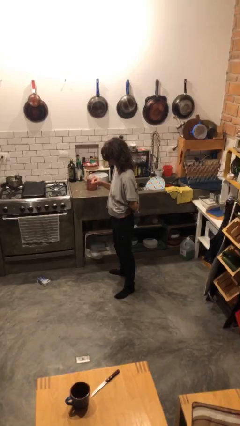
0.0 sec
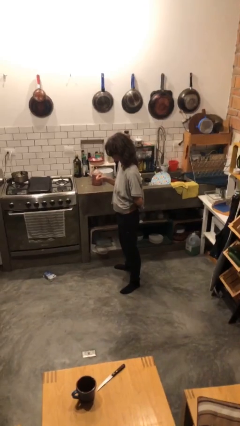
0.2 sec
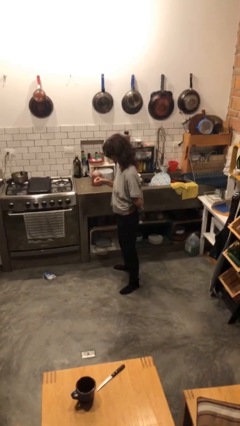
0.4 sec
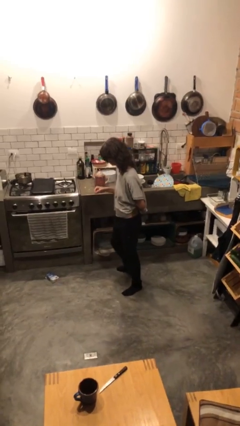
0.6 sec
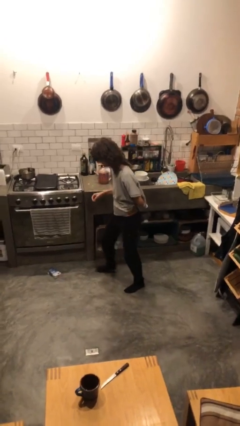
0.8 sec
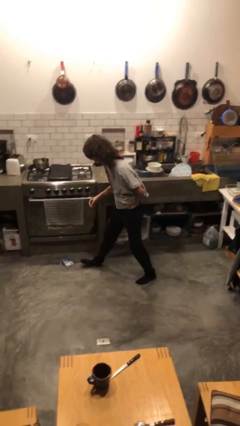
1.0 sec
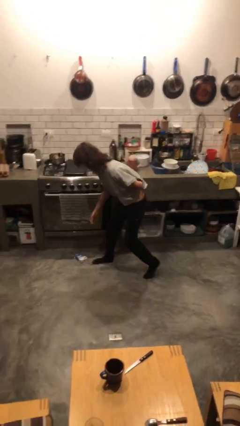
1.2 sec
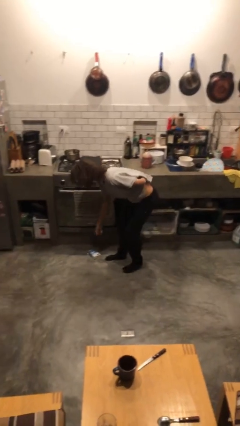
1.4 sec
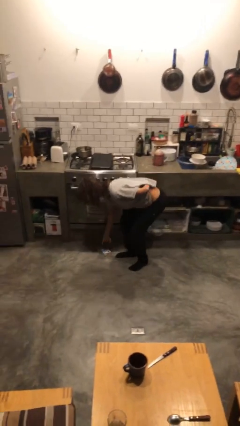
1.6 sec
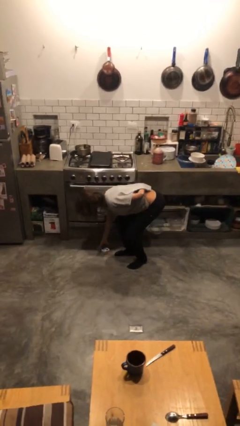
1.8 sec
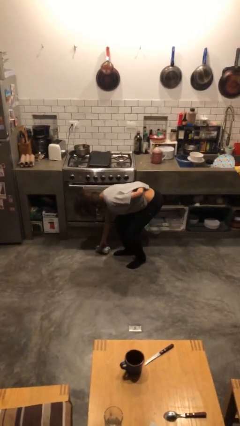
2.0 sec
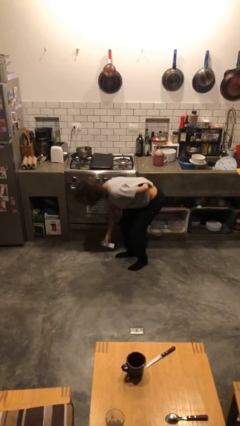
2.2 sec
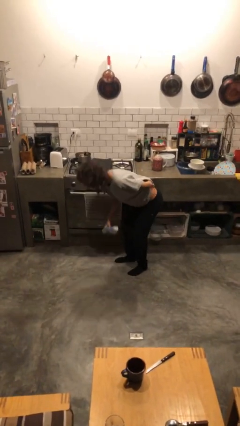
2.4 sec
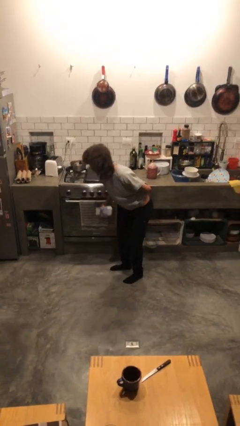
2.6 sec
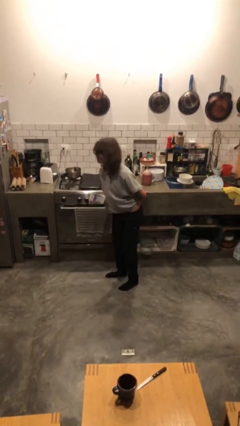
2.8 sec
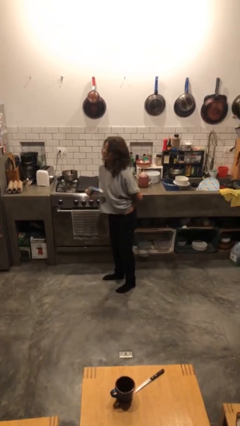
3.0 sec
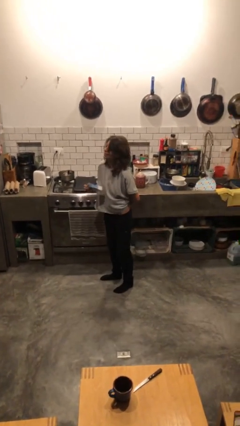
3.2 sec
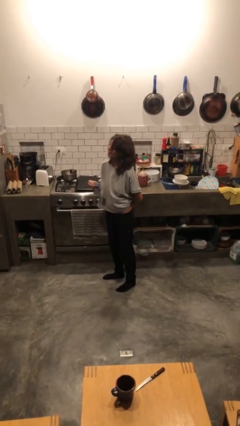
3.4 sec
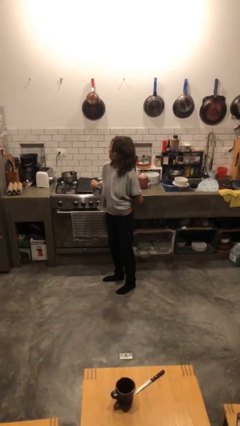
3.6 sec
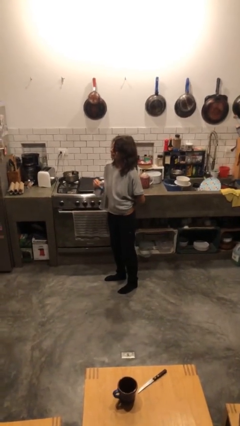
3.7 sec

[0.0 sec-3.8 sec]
person picks up object from floor

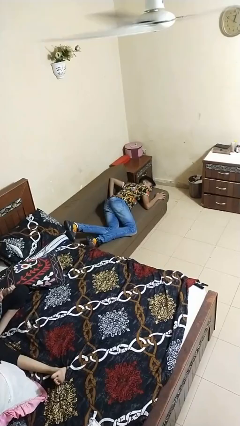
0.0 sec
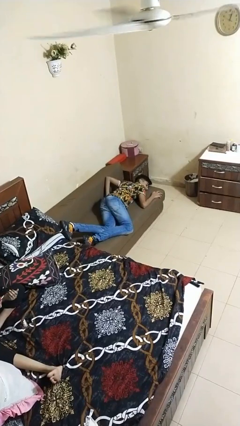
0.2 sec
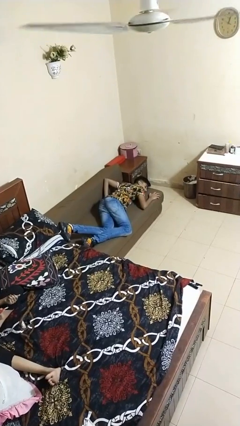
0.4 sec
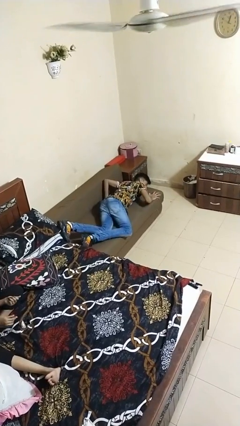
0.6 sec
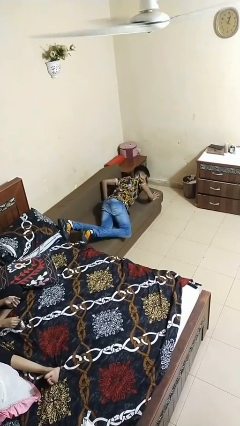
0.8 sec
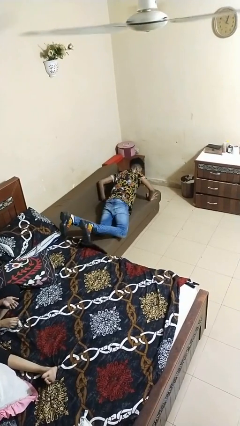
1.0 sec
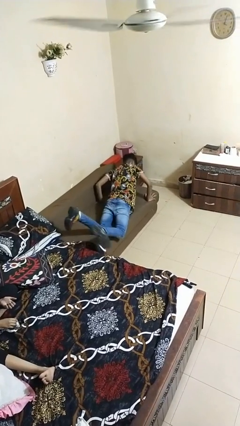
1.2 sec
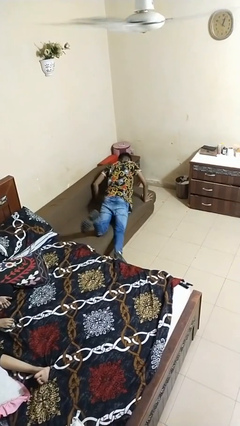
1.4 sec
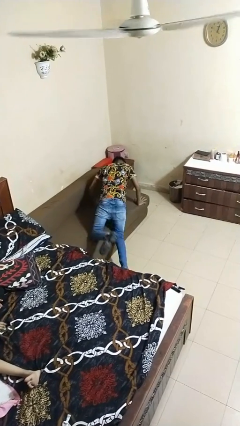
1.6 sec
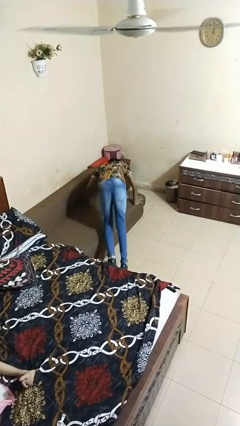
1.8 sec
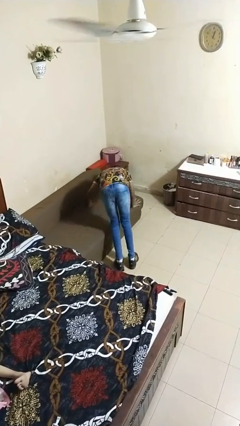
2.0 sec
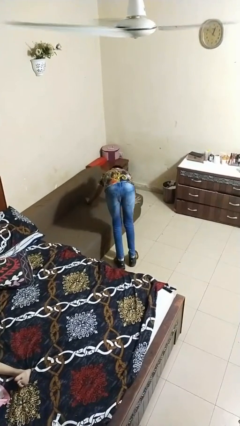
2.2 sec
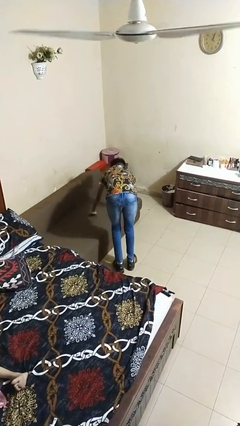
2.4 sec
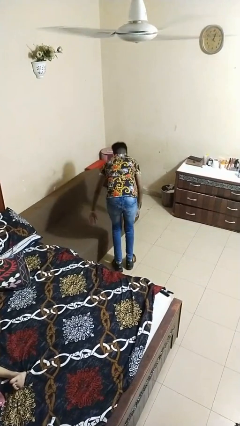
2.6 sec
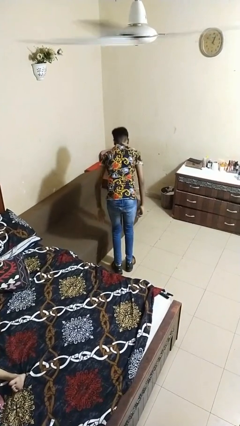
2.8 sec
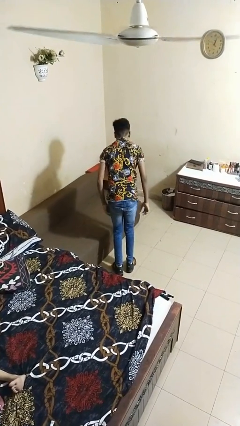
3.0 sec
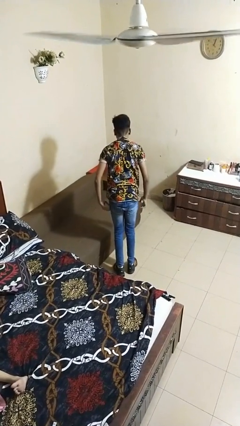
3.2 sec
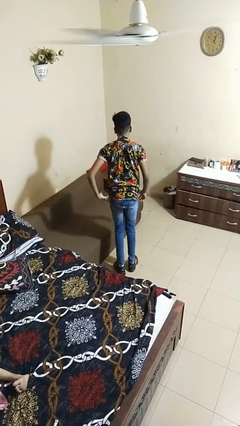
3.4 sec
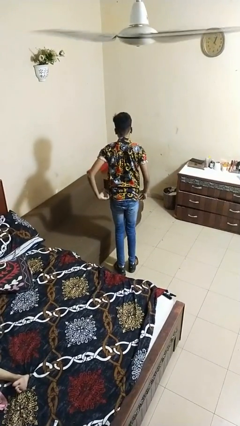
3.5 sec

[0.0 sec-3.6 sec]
person stands up

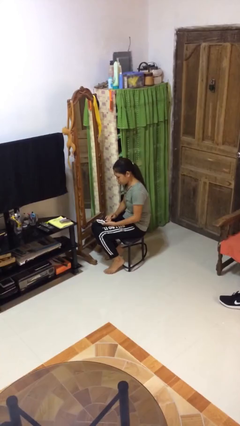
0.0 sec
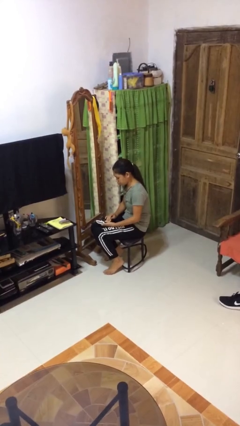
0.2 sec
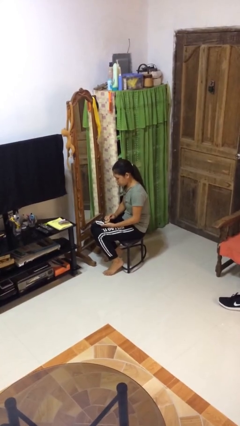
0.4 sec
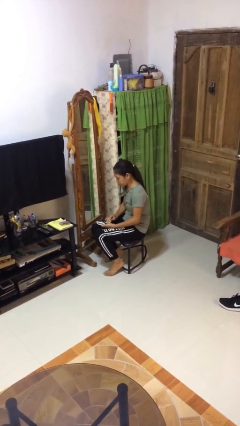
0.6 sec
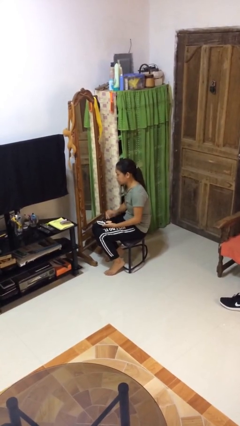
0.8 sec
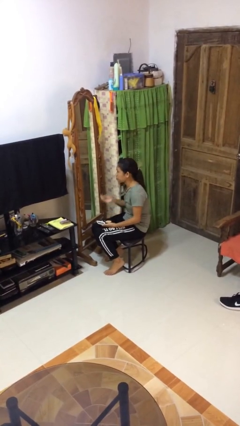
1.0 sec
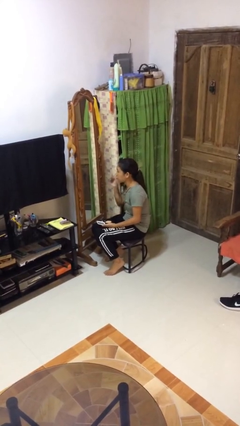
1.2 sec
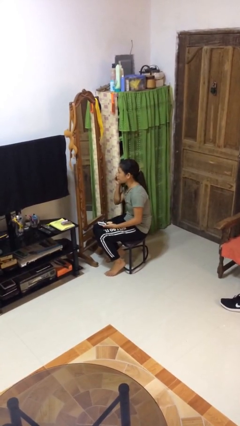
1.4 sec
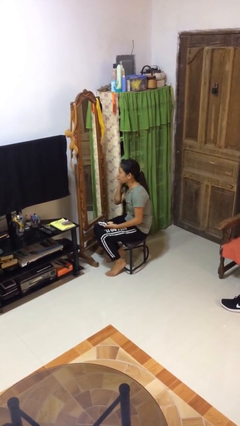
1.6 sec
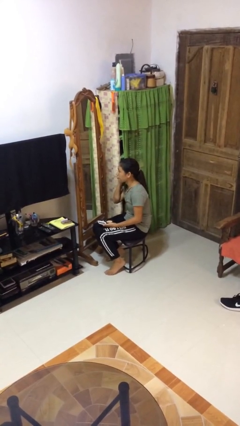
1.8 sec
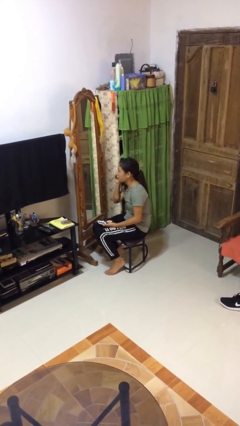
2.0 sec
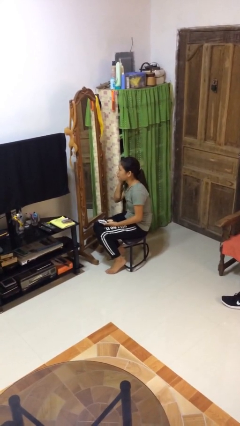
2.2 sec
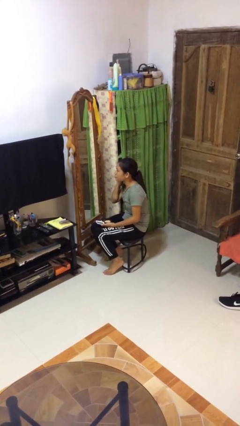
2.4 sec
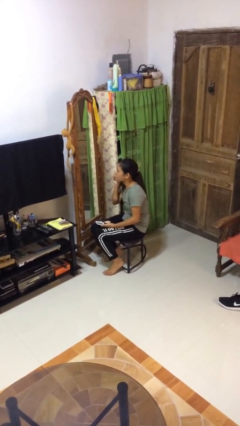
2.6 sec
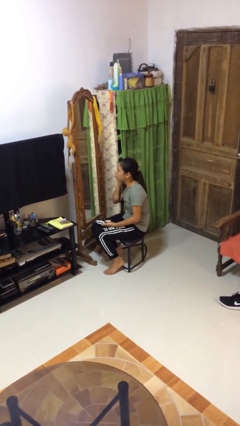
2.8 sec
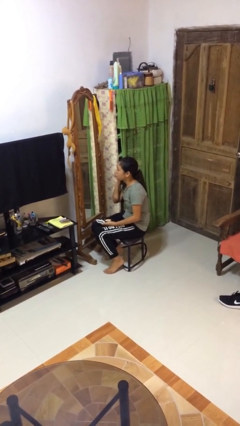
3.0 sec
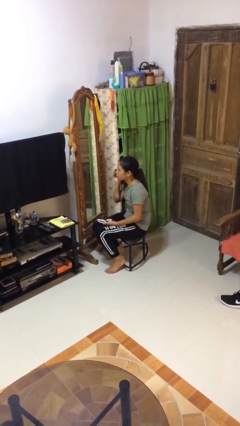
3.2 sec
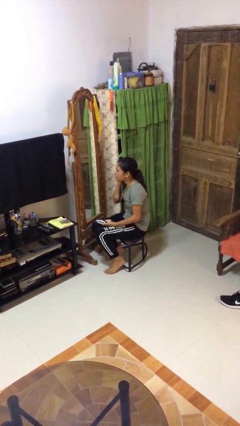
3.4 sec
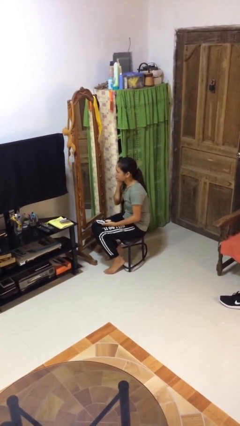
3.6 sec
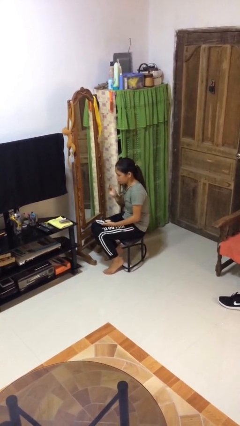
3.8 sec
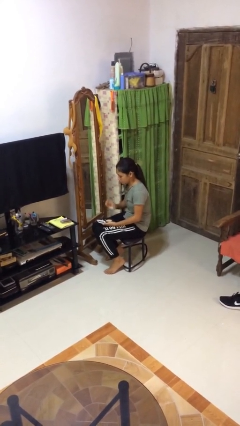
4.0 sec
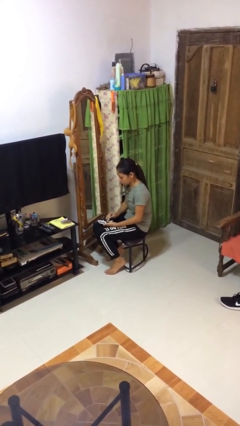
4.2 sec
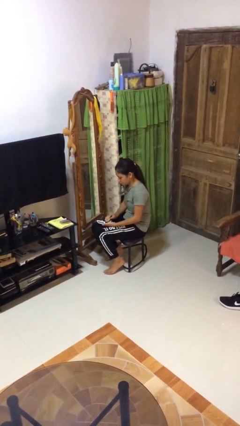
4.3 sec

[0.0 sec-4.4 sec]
person applies foundation makeup

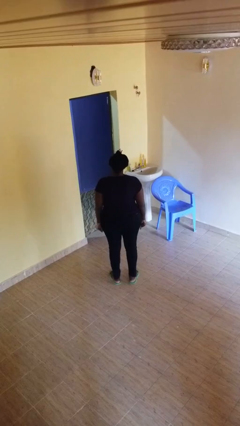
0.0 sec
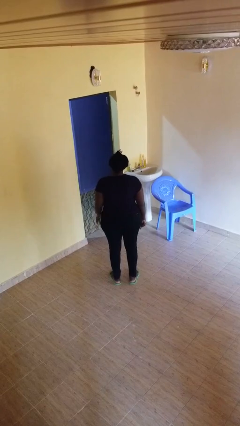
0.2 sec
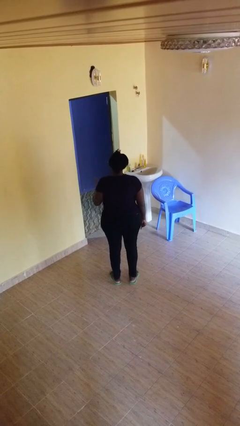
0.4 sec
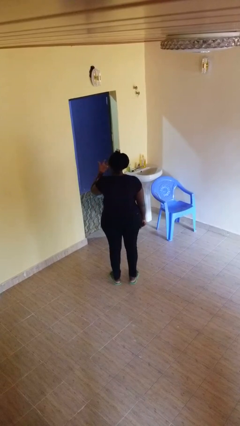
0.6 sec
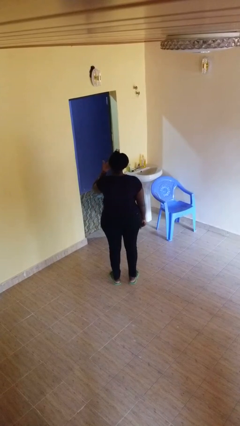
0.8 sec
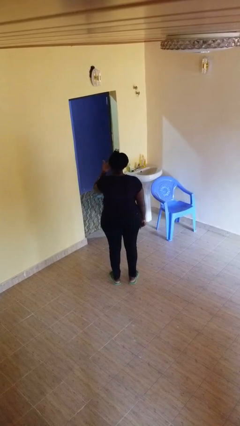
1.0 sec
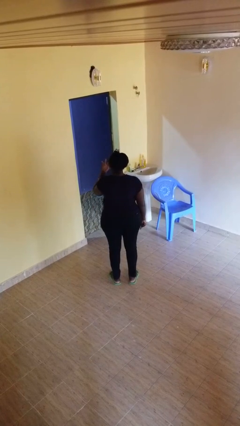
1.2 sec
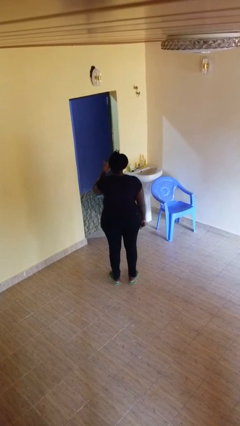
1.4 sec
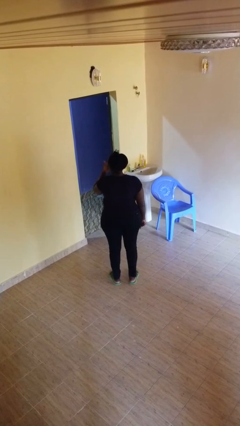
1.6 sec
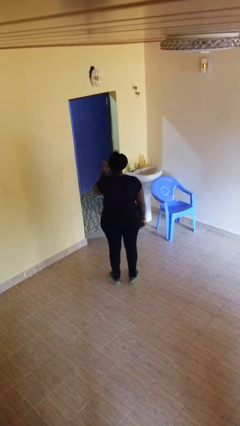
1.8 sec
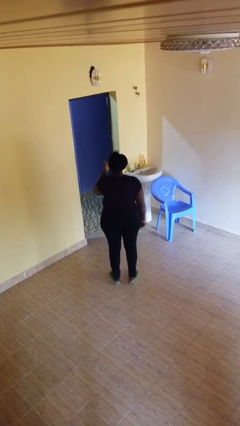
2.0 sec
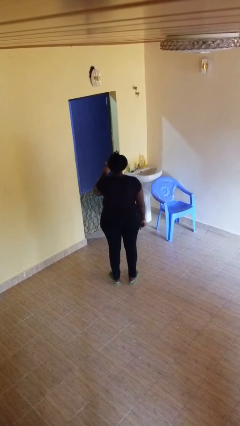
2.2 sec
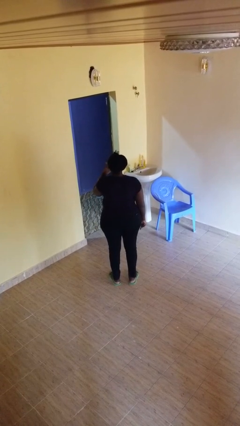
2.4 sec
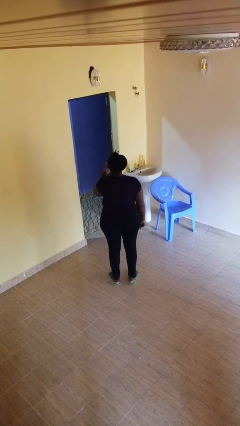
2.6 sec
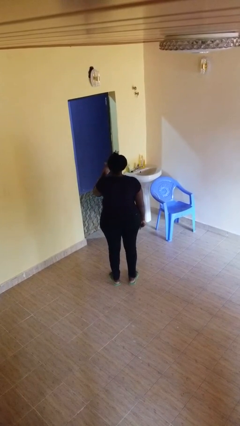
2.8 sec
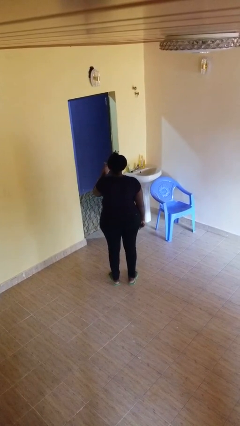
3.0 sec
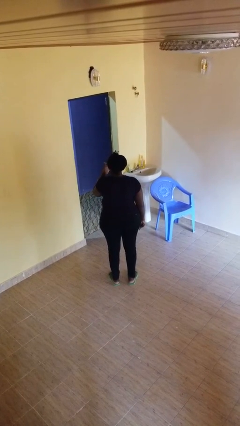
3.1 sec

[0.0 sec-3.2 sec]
person licks fingers

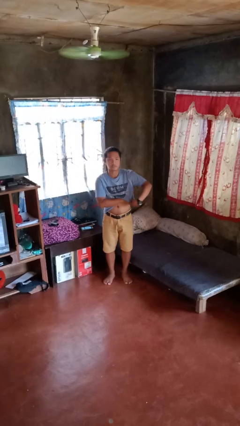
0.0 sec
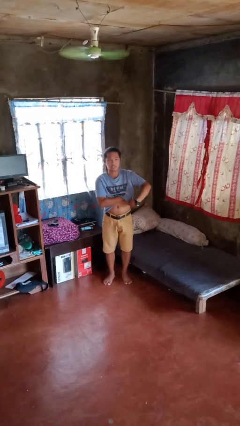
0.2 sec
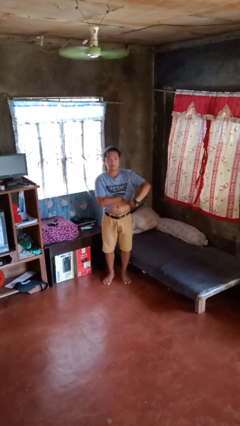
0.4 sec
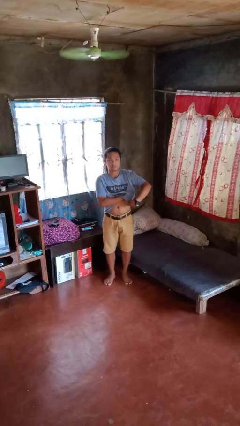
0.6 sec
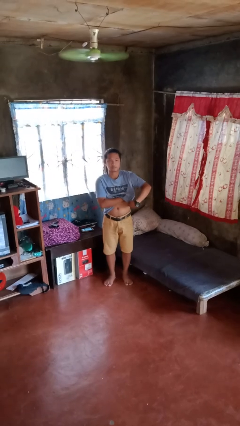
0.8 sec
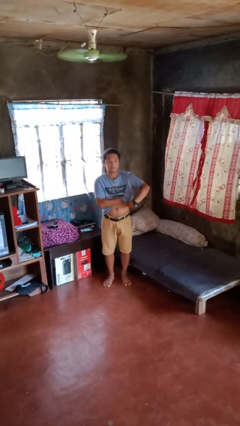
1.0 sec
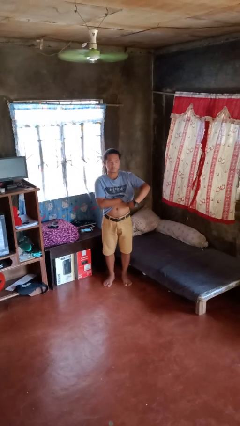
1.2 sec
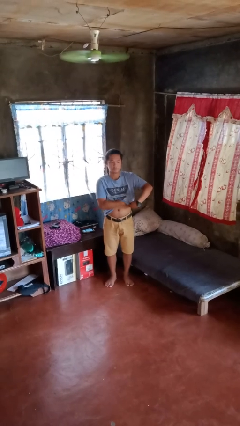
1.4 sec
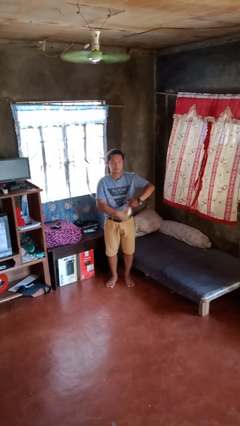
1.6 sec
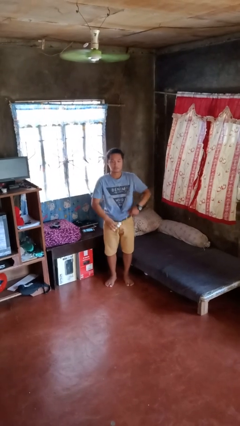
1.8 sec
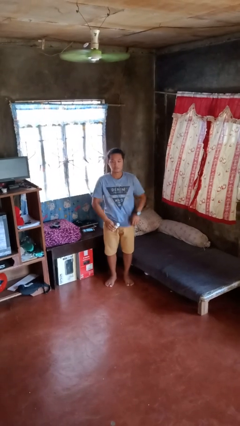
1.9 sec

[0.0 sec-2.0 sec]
person applies deodorant

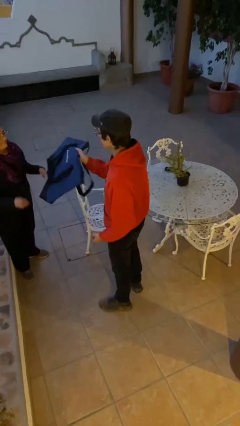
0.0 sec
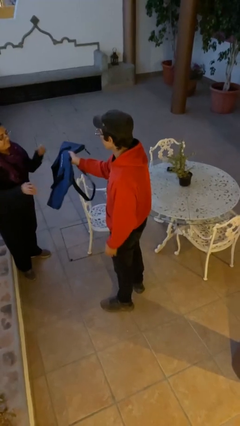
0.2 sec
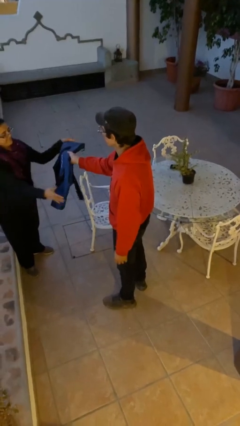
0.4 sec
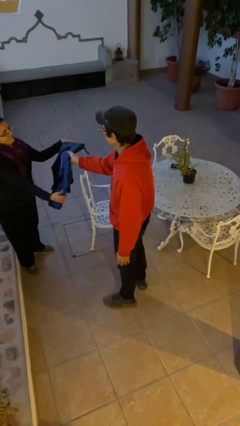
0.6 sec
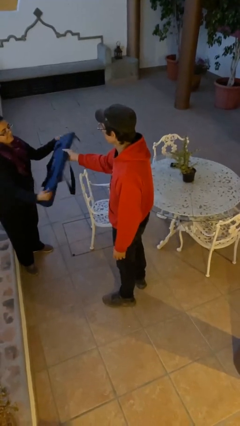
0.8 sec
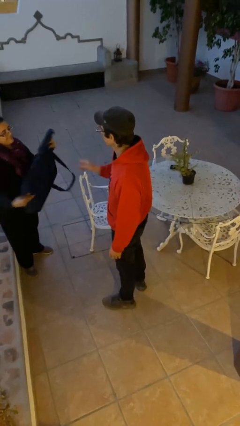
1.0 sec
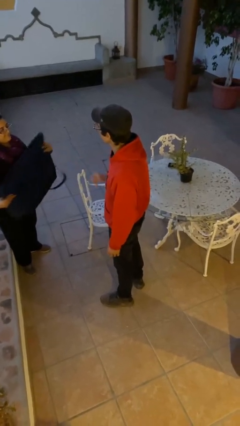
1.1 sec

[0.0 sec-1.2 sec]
person transfers object to person
